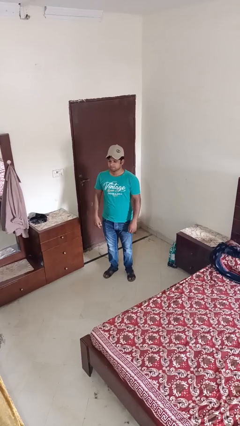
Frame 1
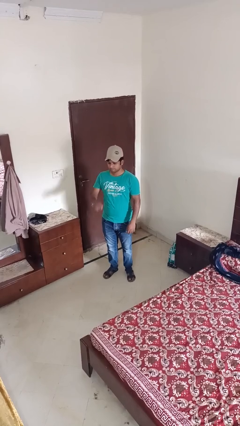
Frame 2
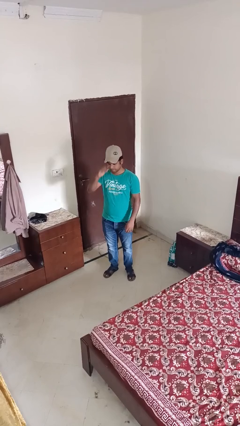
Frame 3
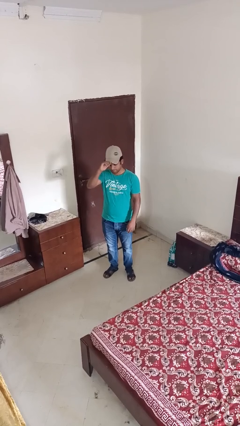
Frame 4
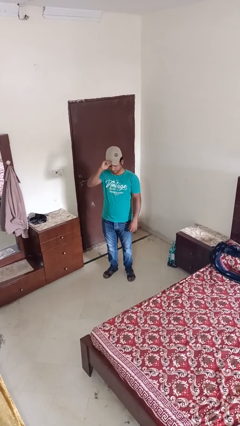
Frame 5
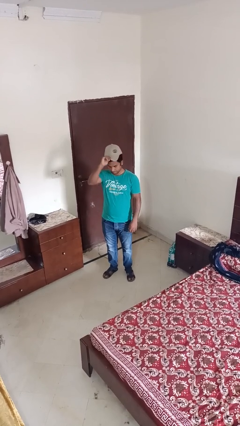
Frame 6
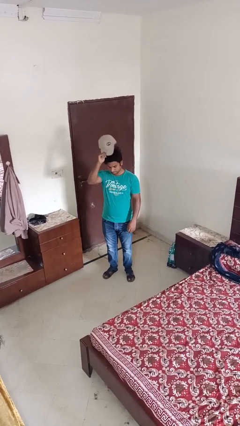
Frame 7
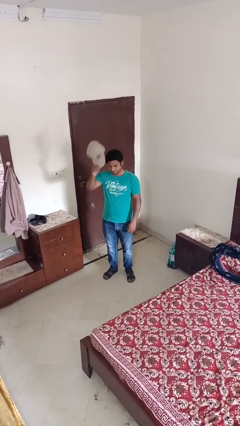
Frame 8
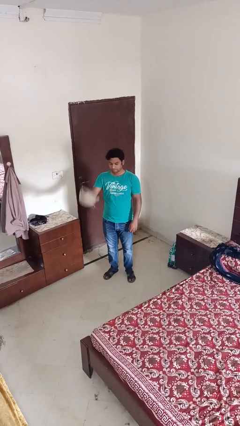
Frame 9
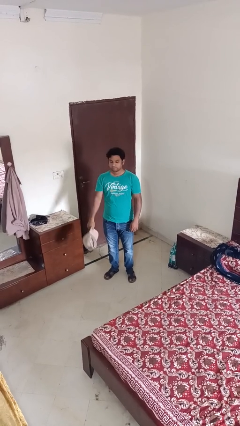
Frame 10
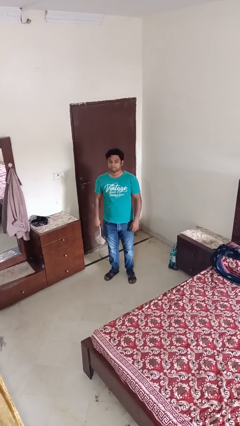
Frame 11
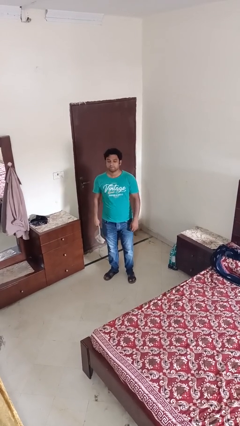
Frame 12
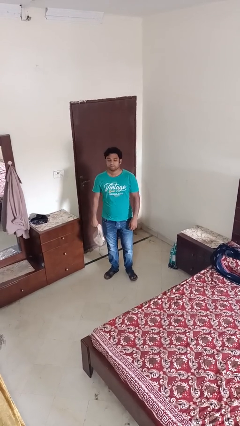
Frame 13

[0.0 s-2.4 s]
person takes off hat

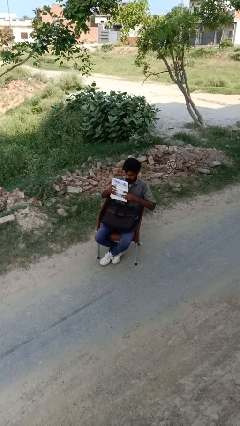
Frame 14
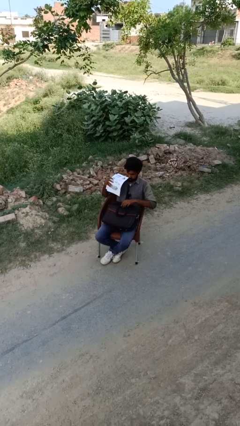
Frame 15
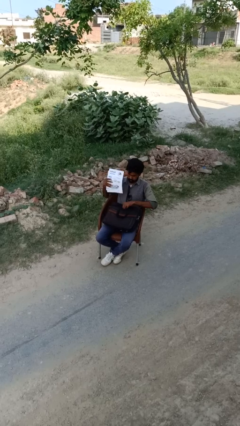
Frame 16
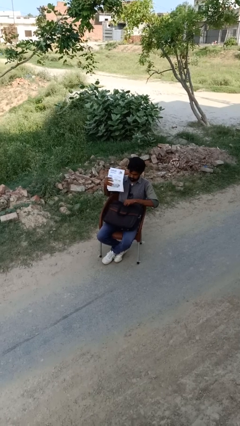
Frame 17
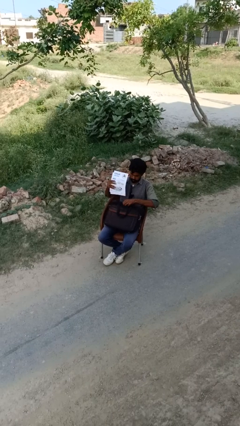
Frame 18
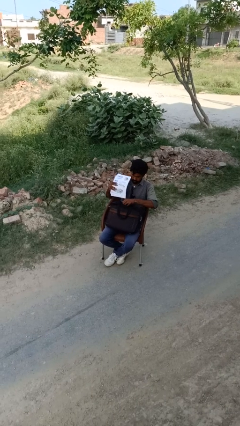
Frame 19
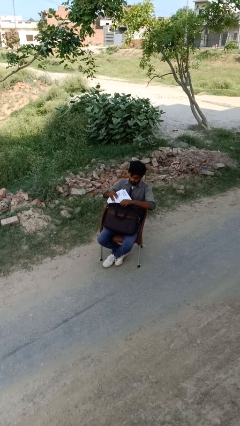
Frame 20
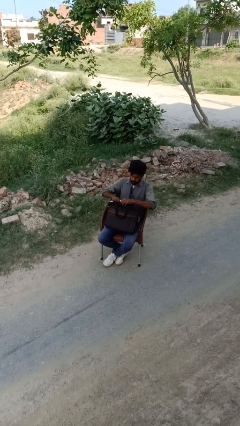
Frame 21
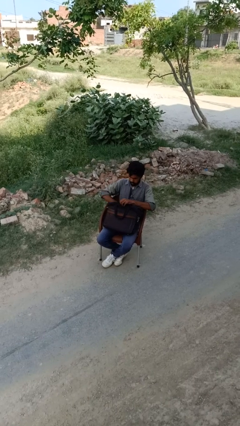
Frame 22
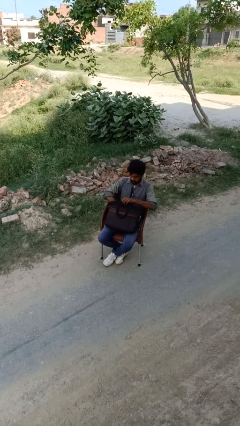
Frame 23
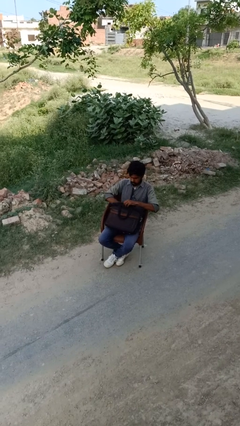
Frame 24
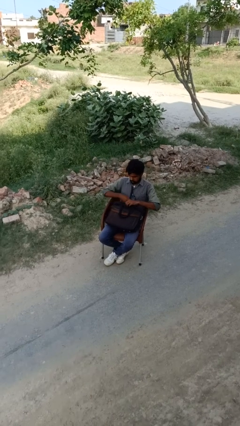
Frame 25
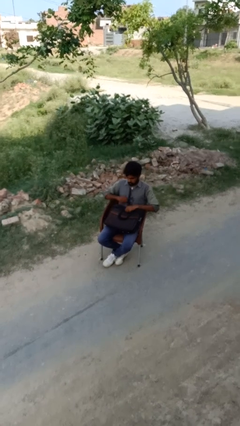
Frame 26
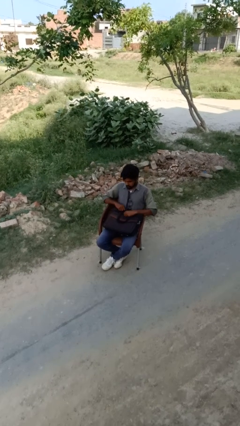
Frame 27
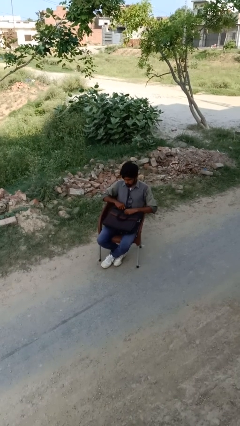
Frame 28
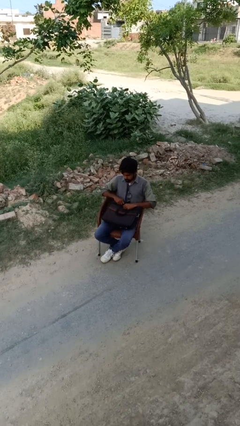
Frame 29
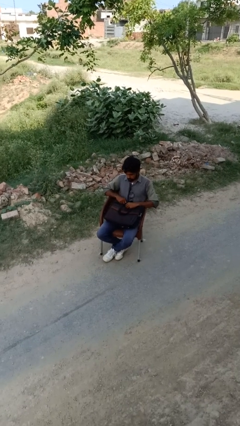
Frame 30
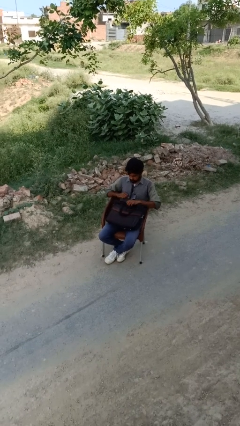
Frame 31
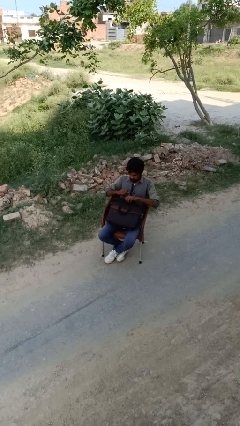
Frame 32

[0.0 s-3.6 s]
person puts object into backpack

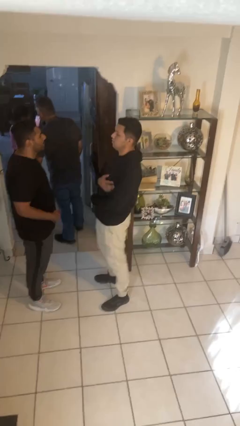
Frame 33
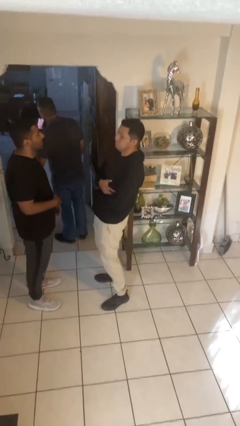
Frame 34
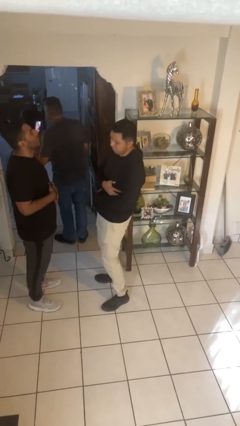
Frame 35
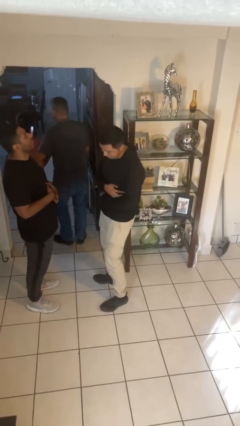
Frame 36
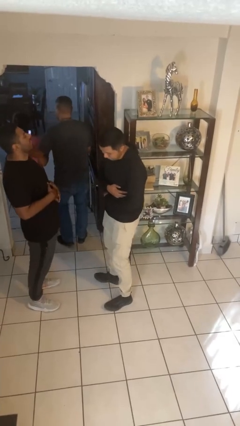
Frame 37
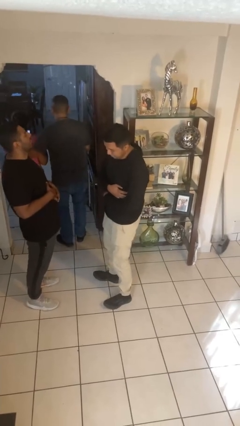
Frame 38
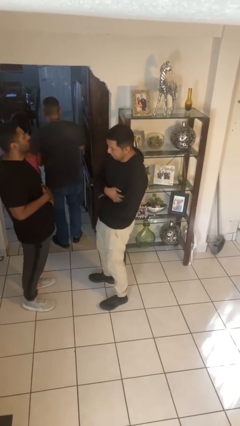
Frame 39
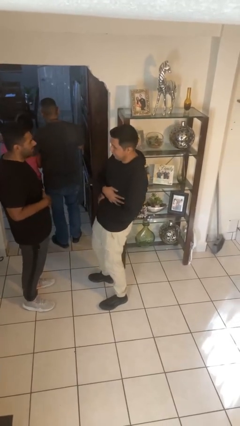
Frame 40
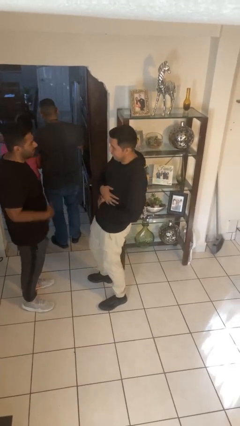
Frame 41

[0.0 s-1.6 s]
person laughs with person

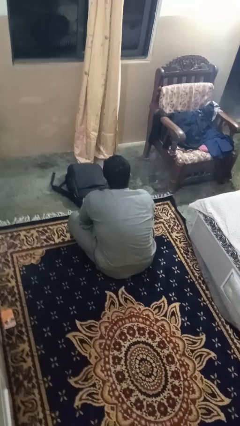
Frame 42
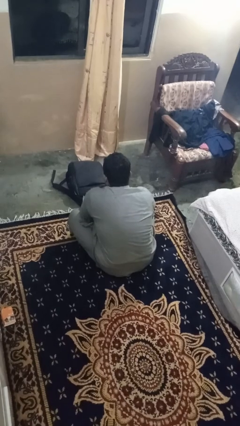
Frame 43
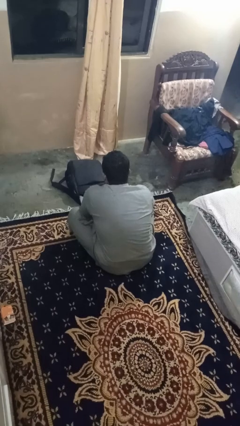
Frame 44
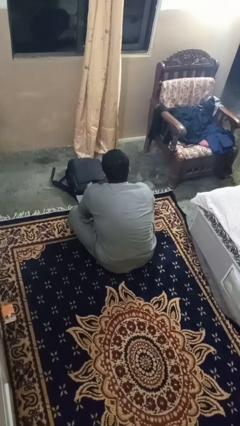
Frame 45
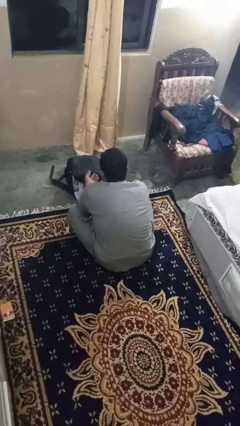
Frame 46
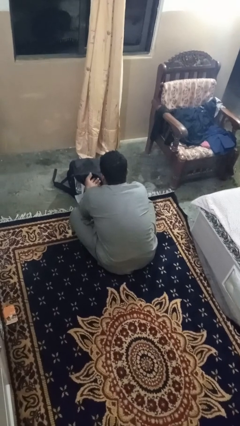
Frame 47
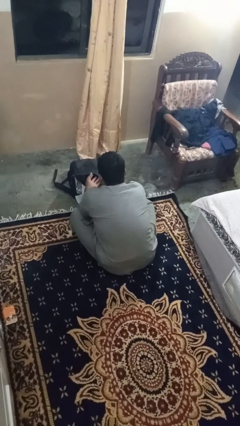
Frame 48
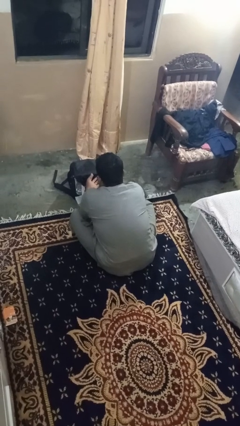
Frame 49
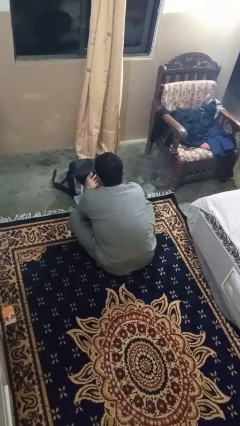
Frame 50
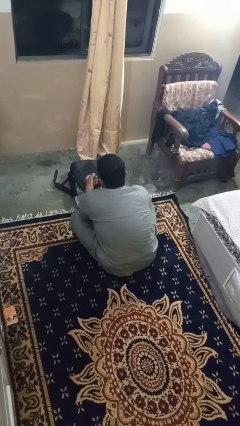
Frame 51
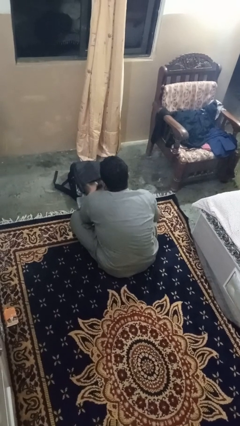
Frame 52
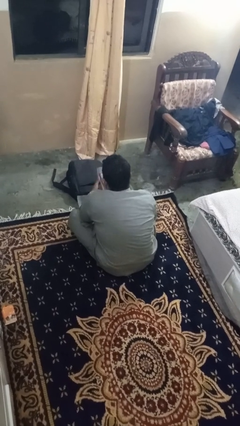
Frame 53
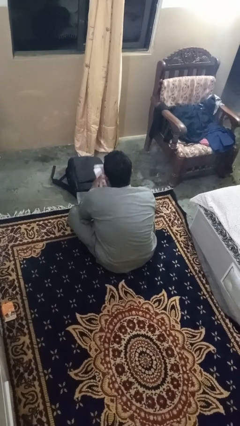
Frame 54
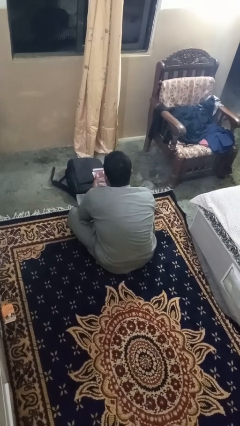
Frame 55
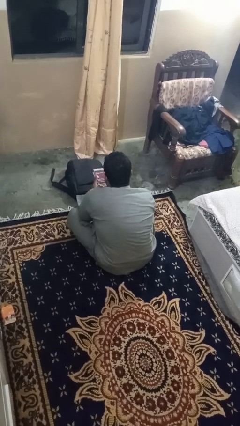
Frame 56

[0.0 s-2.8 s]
person takes object from bag

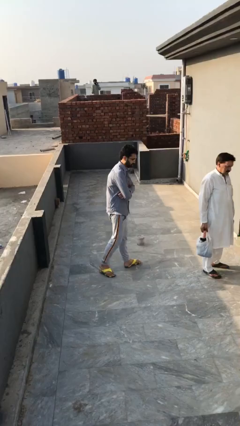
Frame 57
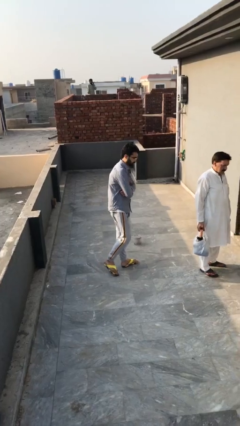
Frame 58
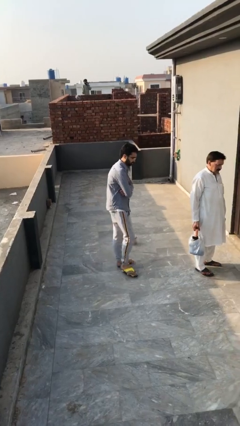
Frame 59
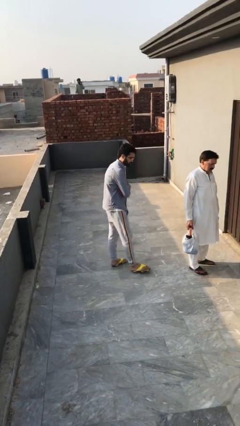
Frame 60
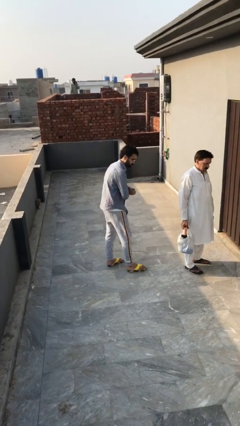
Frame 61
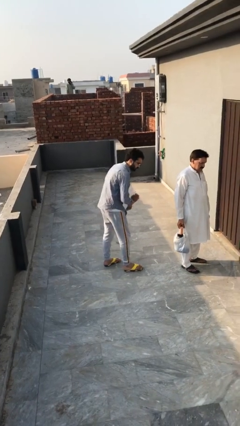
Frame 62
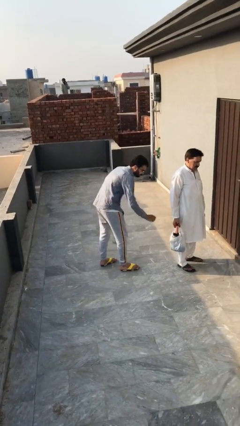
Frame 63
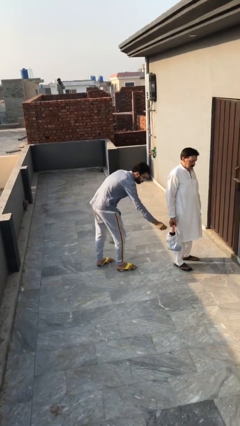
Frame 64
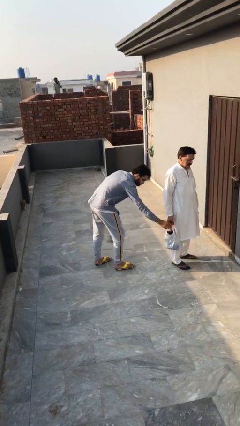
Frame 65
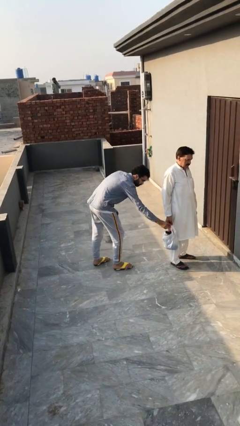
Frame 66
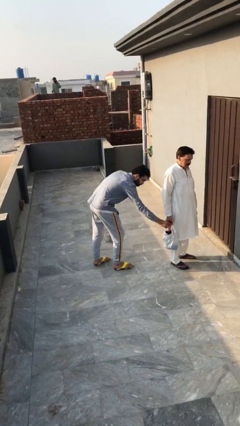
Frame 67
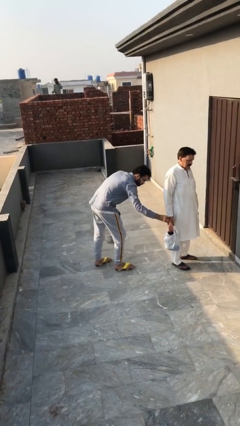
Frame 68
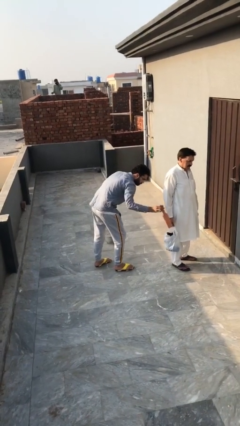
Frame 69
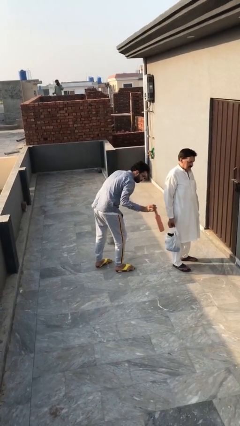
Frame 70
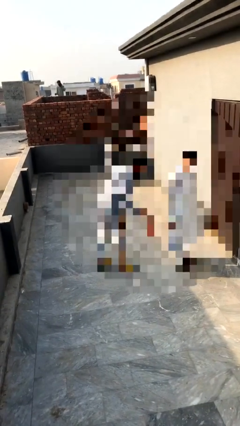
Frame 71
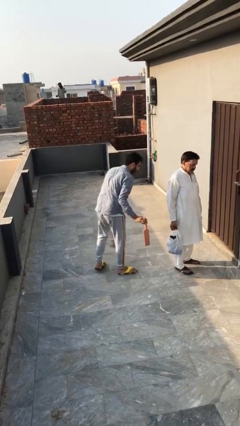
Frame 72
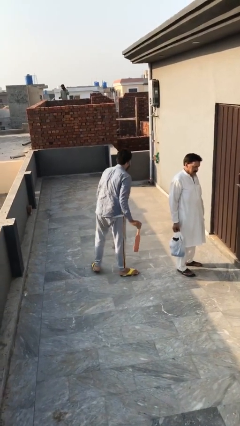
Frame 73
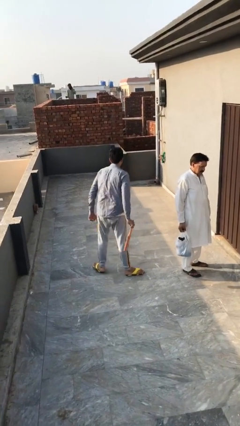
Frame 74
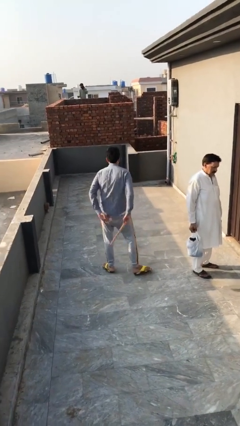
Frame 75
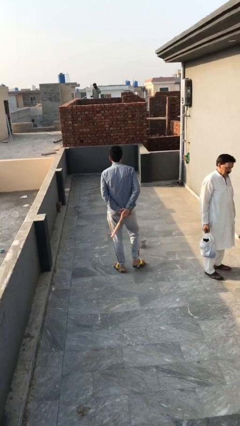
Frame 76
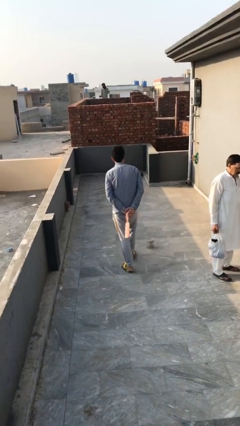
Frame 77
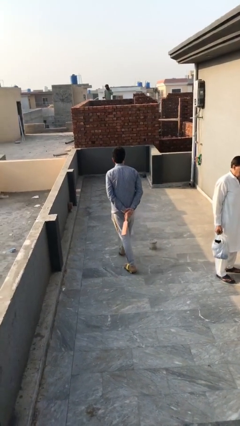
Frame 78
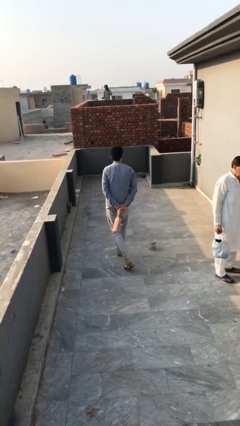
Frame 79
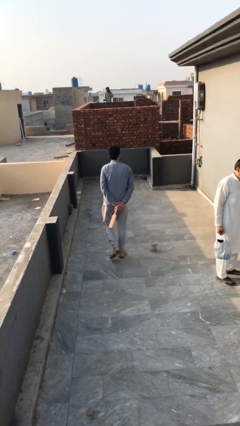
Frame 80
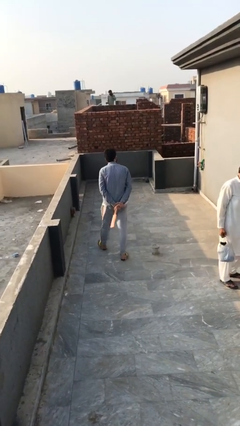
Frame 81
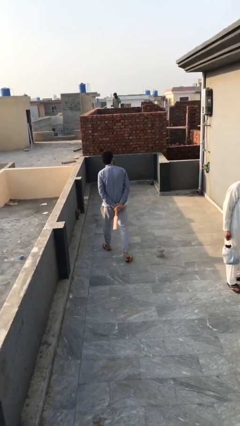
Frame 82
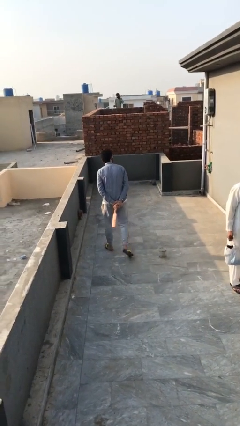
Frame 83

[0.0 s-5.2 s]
person steals object from person

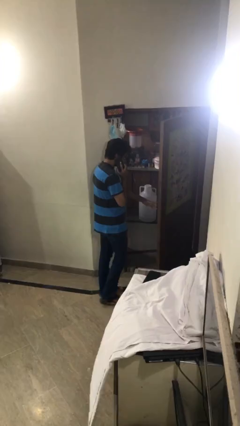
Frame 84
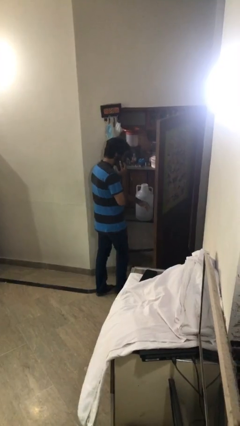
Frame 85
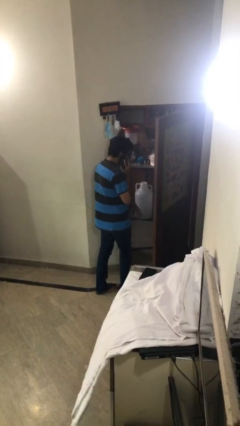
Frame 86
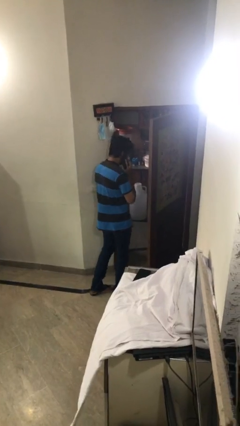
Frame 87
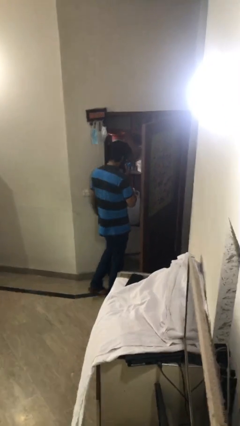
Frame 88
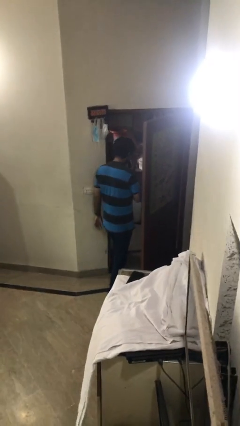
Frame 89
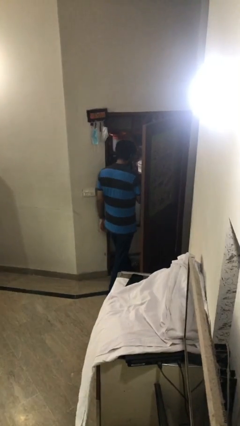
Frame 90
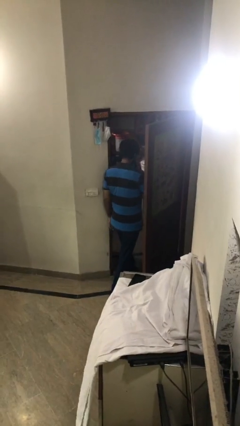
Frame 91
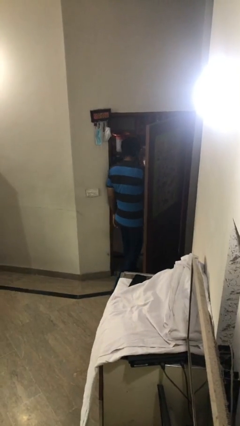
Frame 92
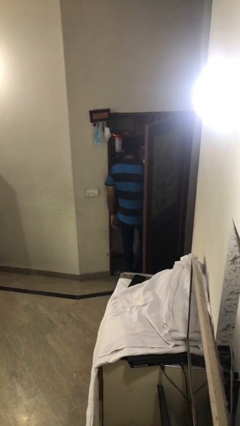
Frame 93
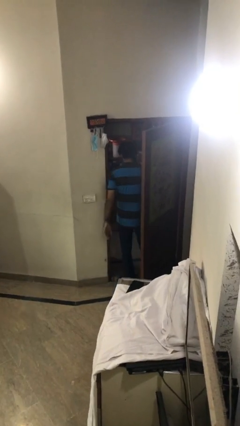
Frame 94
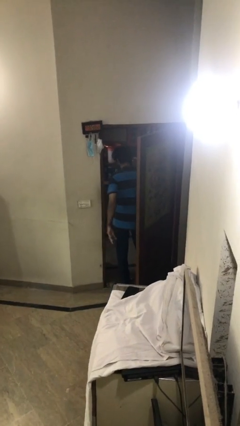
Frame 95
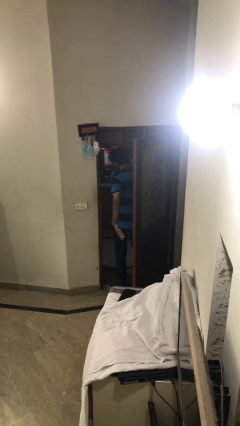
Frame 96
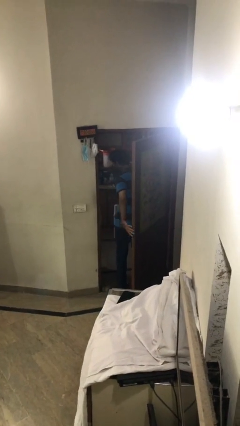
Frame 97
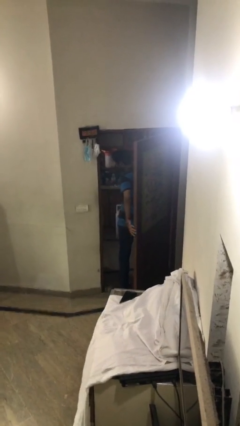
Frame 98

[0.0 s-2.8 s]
person exits scene through structure
